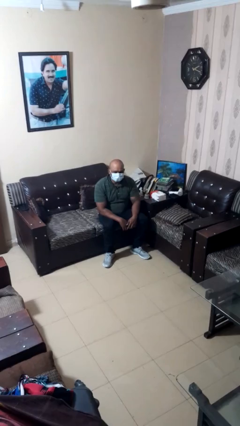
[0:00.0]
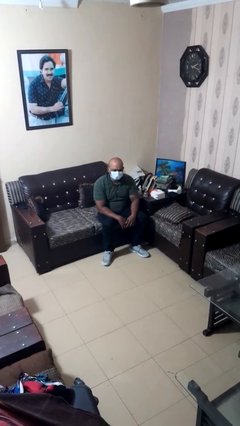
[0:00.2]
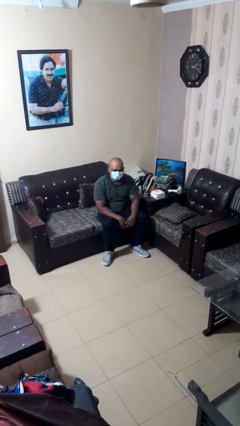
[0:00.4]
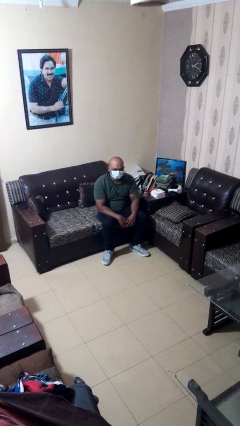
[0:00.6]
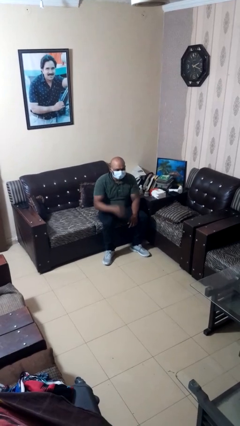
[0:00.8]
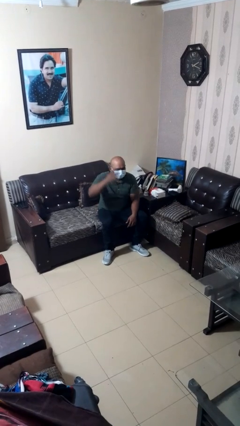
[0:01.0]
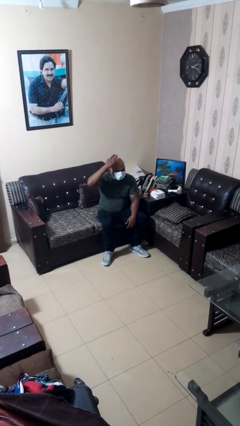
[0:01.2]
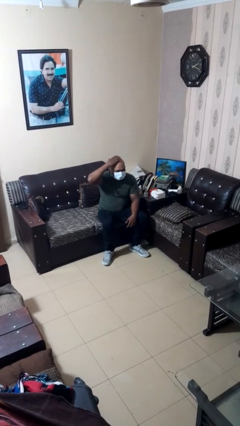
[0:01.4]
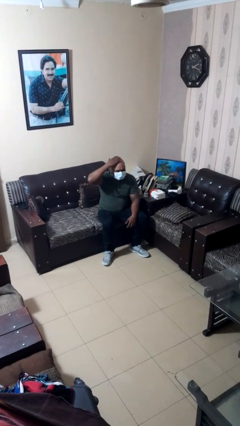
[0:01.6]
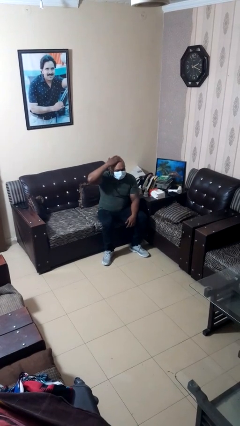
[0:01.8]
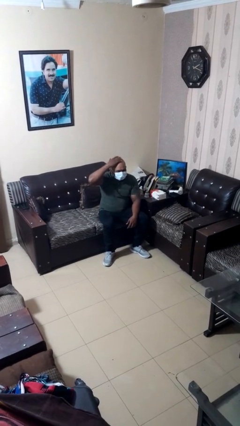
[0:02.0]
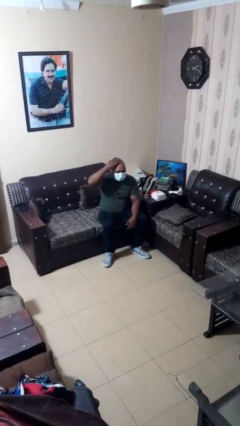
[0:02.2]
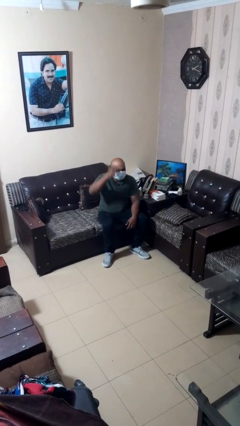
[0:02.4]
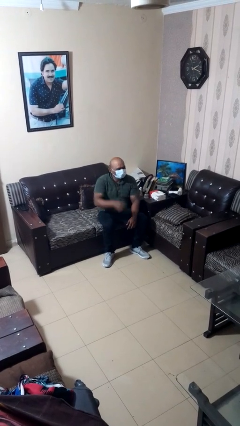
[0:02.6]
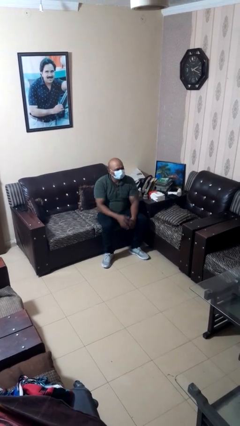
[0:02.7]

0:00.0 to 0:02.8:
person pats head

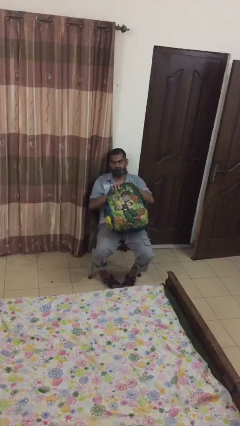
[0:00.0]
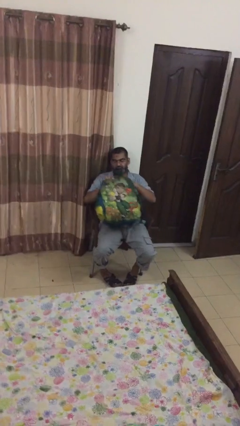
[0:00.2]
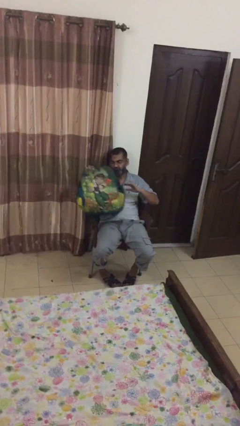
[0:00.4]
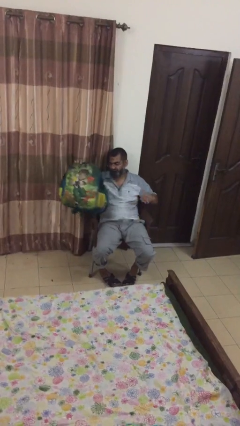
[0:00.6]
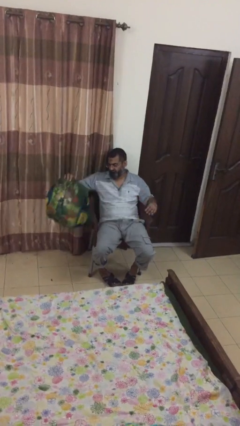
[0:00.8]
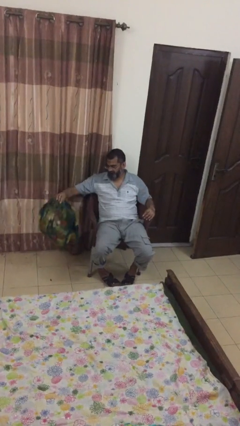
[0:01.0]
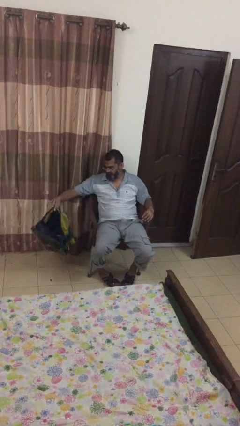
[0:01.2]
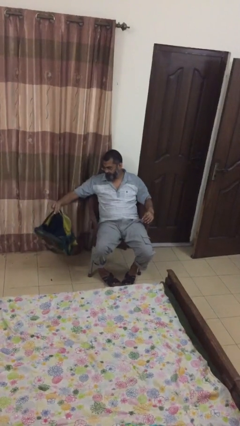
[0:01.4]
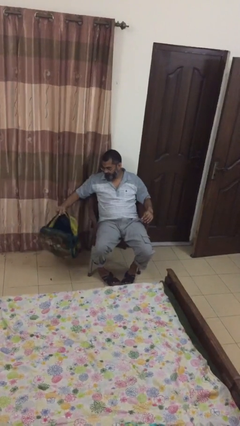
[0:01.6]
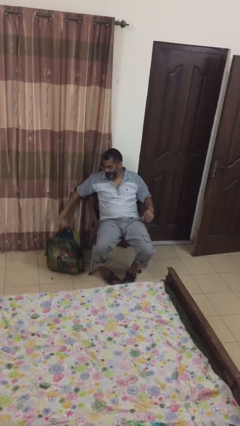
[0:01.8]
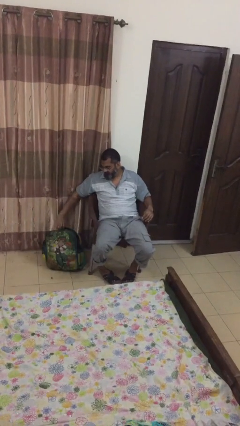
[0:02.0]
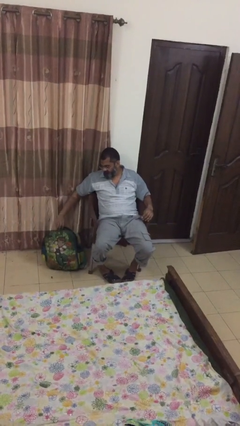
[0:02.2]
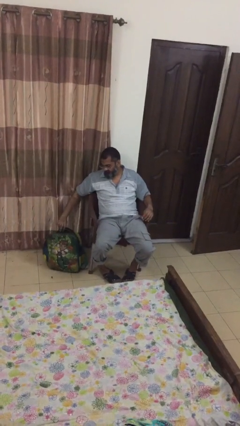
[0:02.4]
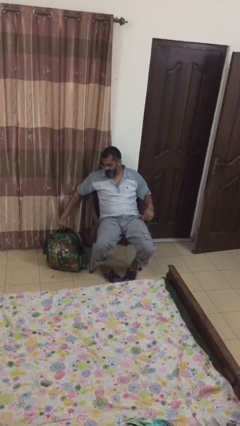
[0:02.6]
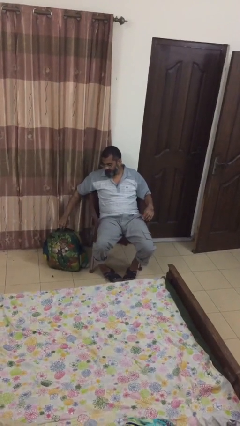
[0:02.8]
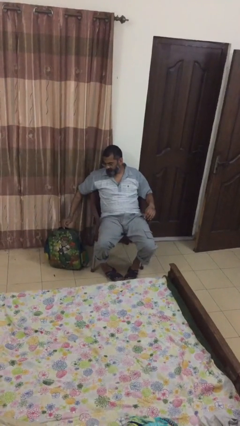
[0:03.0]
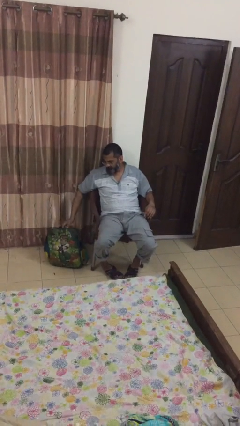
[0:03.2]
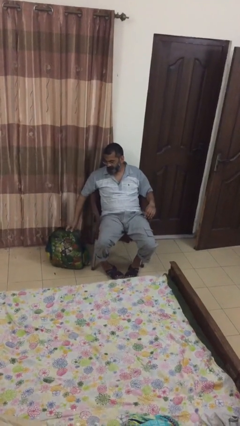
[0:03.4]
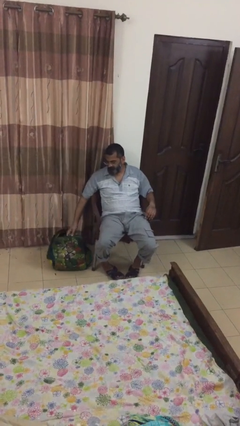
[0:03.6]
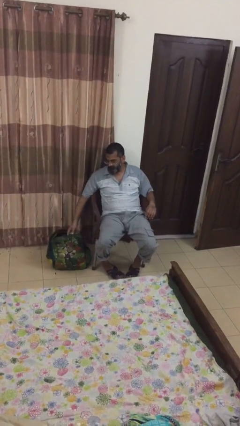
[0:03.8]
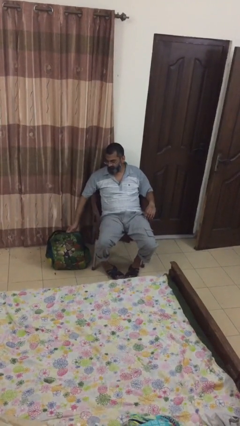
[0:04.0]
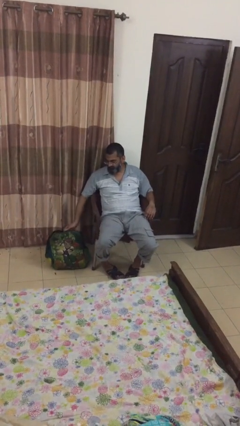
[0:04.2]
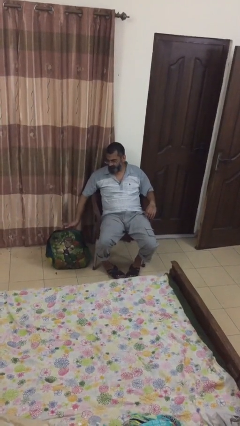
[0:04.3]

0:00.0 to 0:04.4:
person puts down object on floor

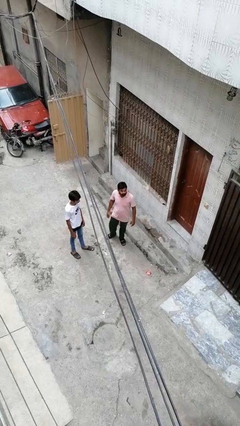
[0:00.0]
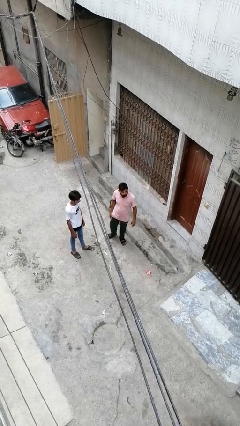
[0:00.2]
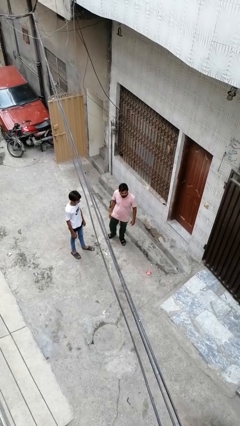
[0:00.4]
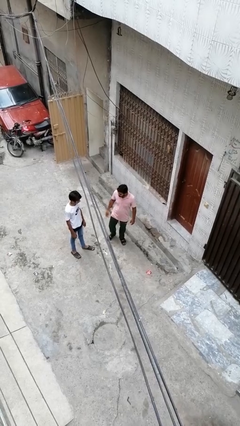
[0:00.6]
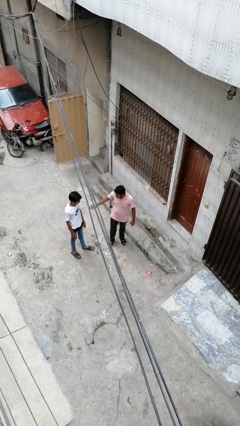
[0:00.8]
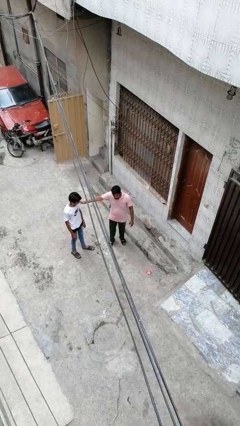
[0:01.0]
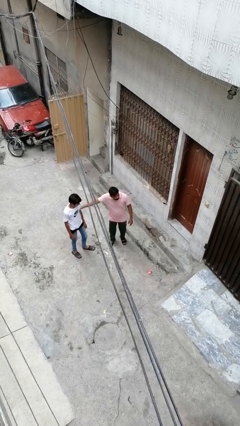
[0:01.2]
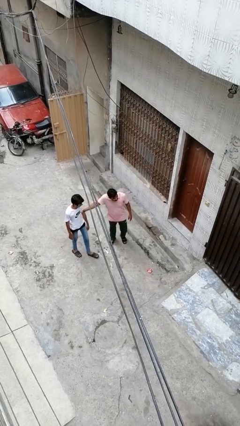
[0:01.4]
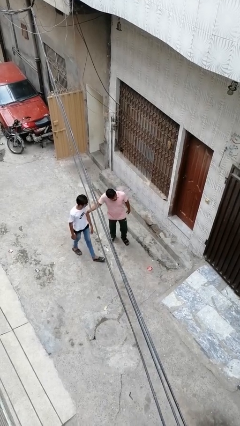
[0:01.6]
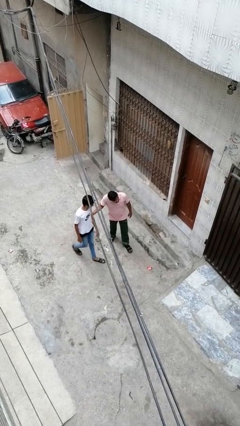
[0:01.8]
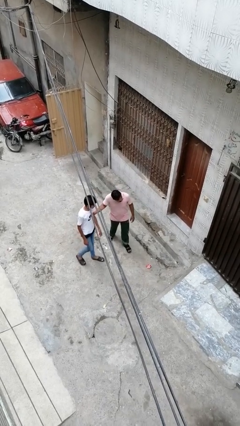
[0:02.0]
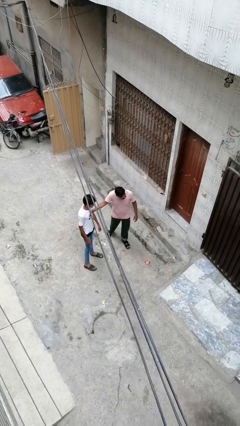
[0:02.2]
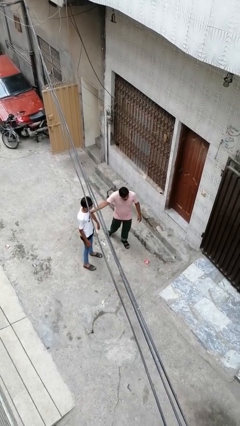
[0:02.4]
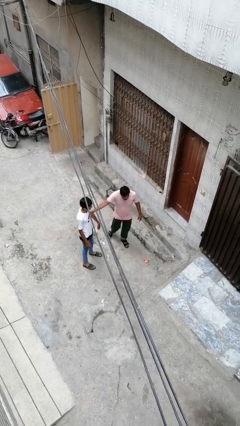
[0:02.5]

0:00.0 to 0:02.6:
person grabs person by bicep

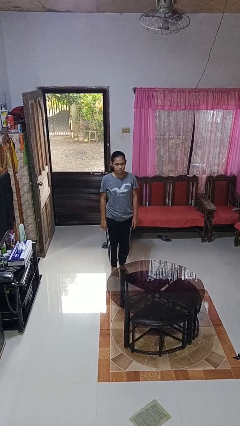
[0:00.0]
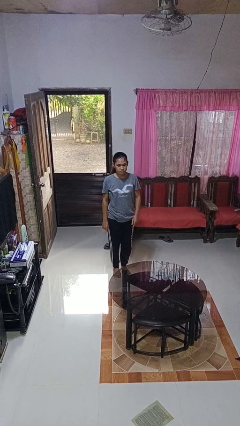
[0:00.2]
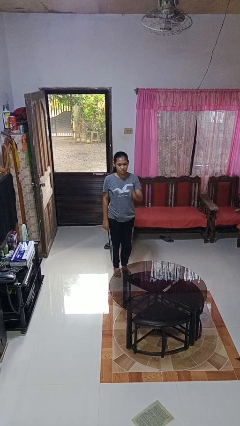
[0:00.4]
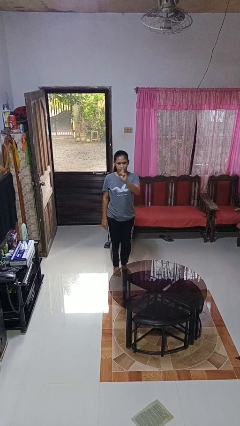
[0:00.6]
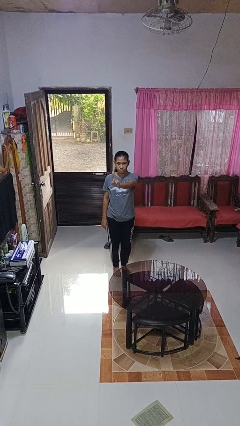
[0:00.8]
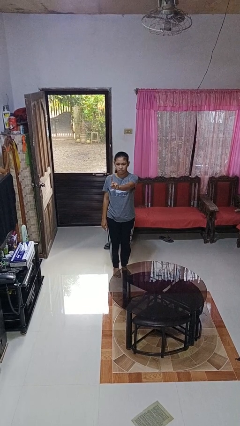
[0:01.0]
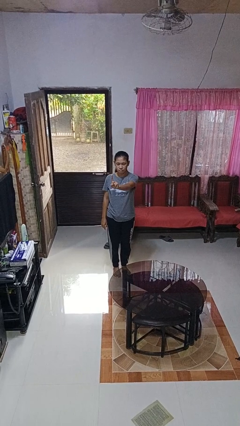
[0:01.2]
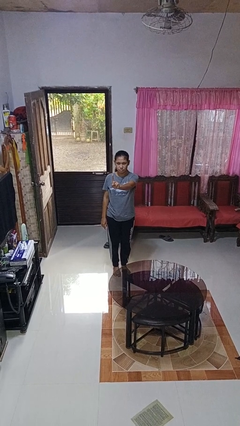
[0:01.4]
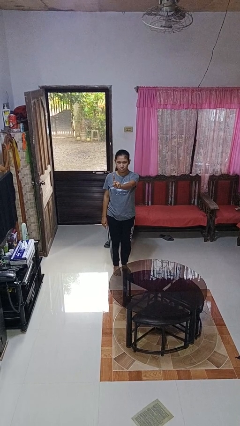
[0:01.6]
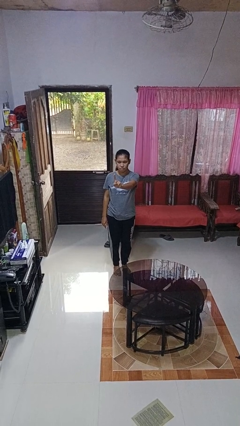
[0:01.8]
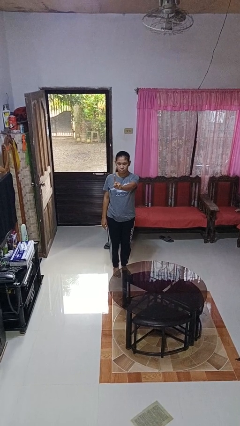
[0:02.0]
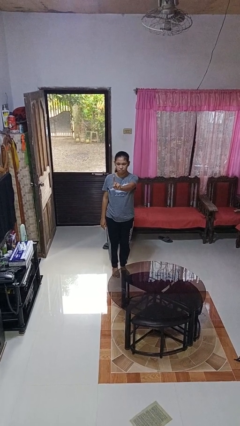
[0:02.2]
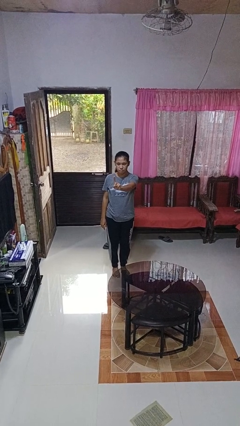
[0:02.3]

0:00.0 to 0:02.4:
person gestures number one

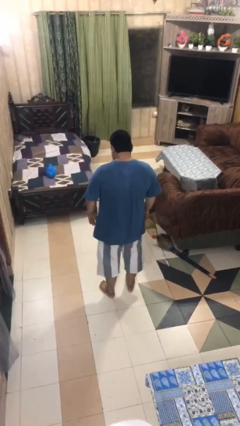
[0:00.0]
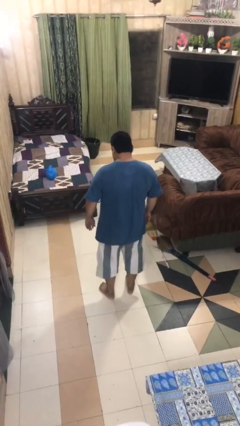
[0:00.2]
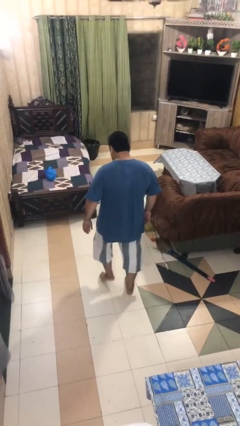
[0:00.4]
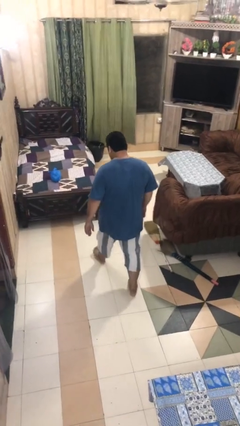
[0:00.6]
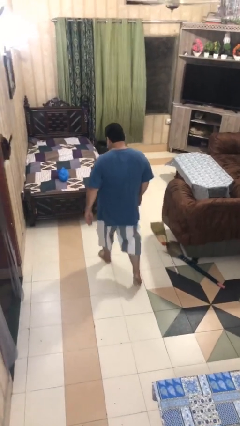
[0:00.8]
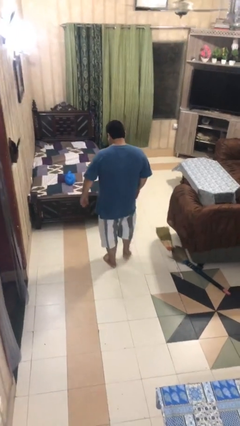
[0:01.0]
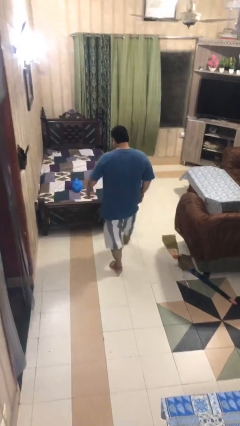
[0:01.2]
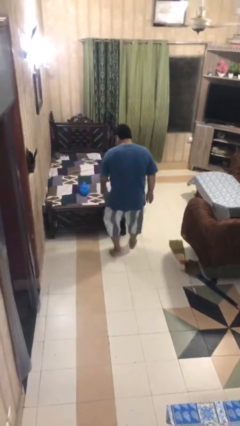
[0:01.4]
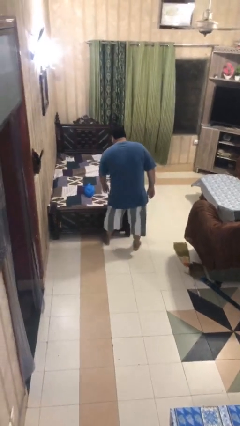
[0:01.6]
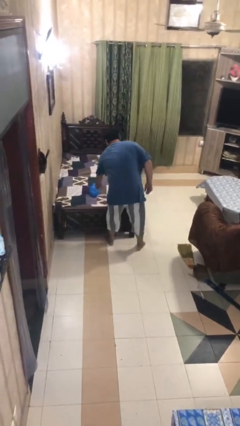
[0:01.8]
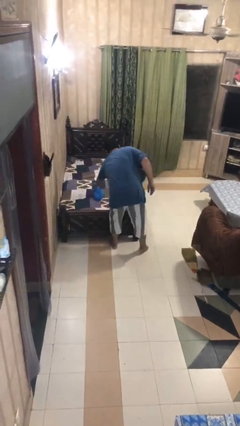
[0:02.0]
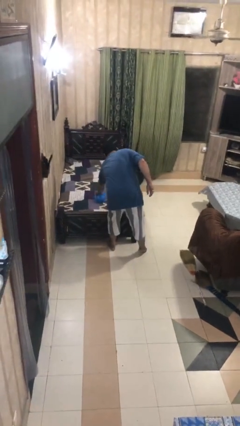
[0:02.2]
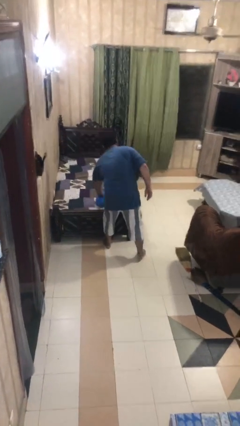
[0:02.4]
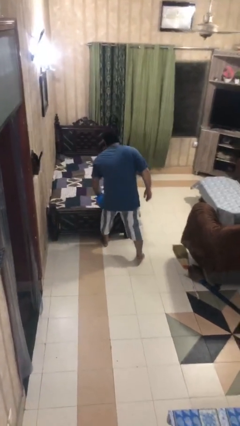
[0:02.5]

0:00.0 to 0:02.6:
person picks up object from bed

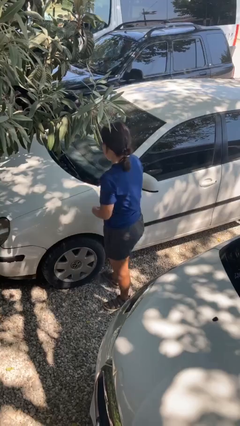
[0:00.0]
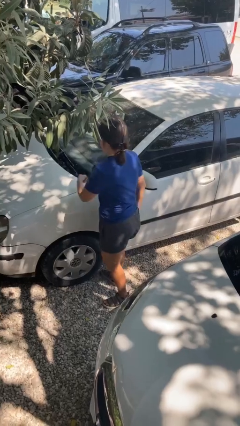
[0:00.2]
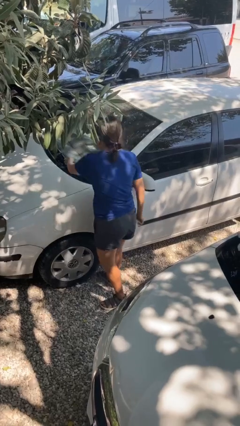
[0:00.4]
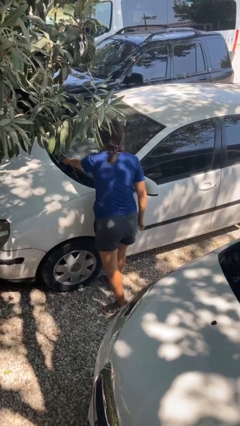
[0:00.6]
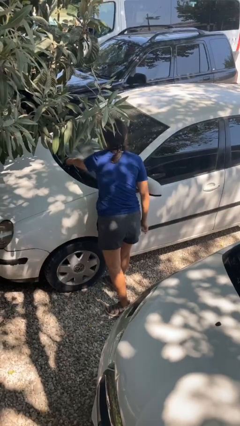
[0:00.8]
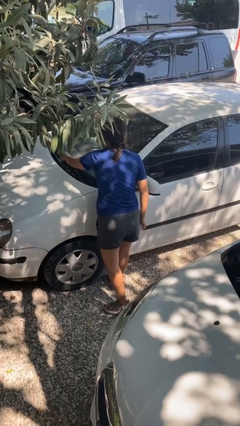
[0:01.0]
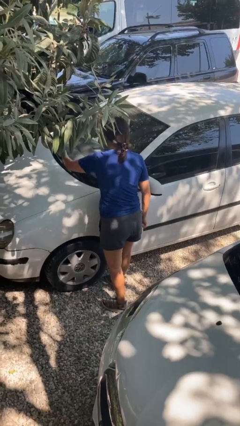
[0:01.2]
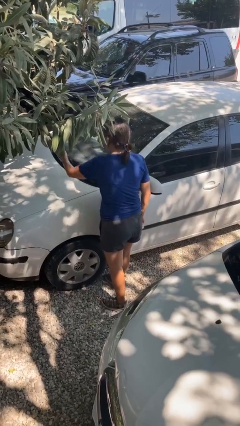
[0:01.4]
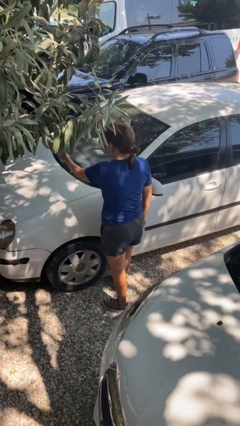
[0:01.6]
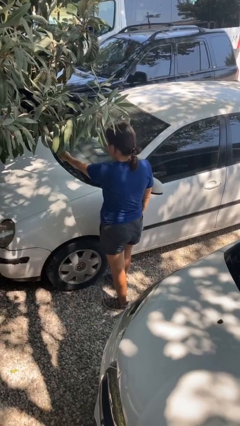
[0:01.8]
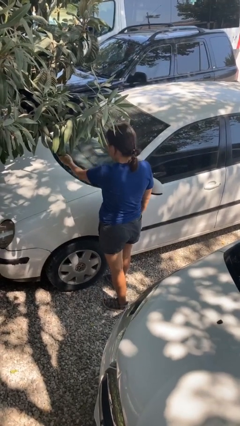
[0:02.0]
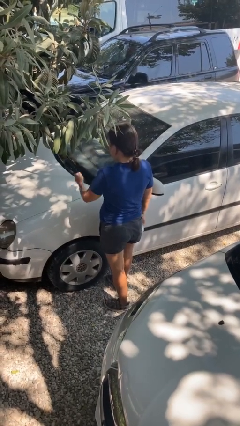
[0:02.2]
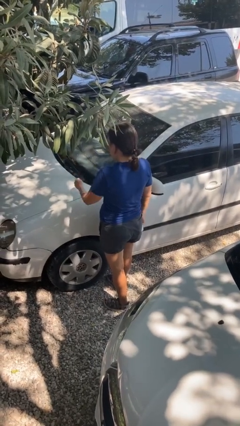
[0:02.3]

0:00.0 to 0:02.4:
person flips up car wipers

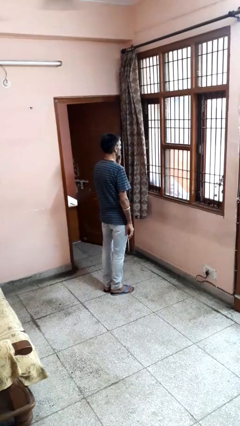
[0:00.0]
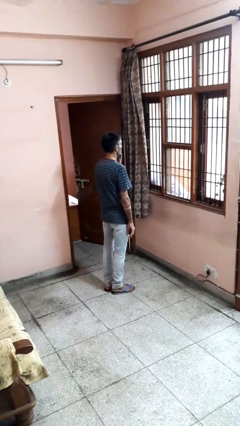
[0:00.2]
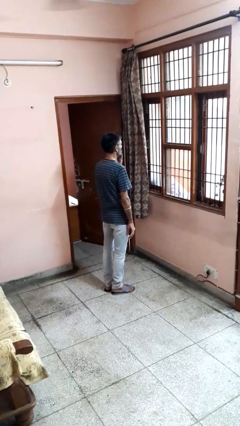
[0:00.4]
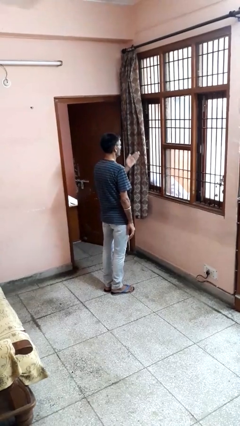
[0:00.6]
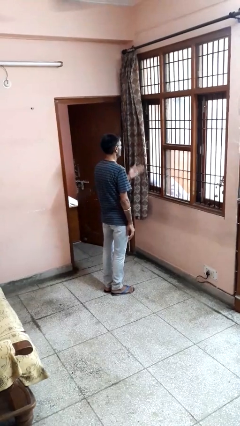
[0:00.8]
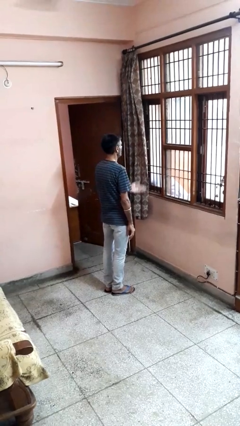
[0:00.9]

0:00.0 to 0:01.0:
person gestures blow kiss
